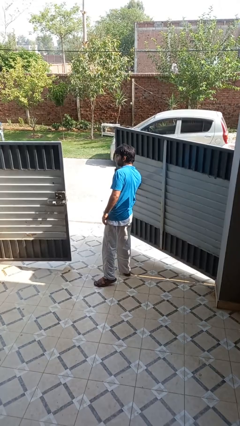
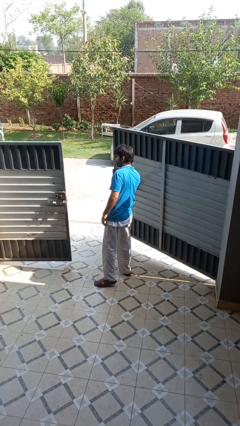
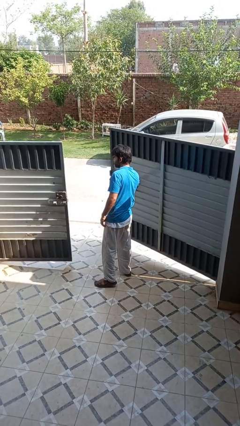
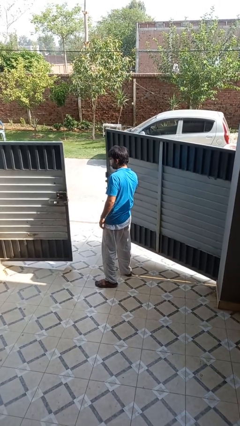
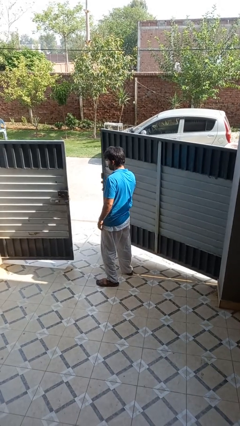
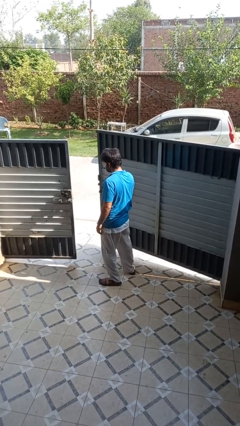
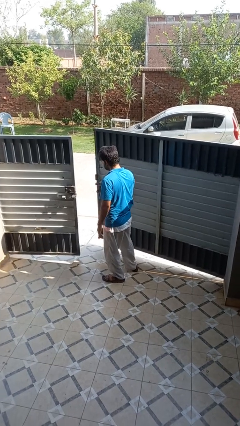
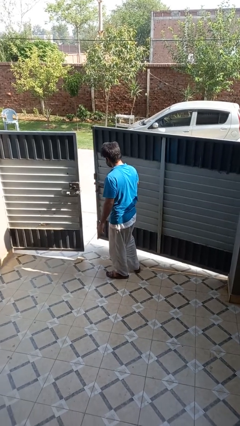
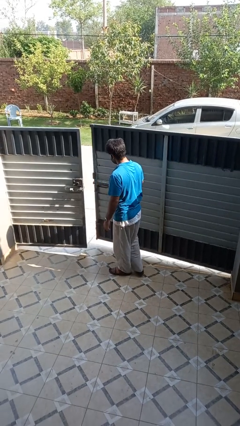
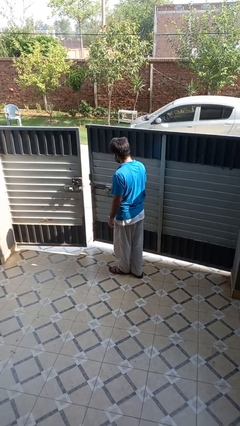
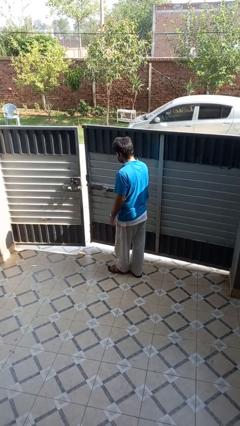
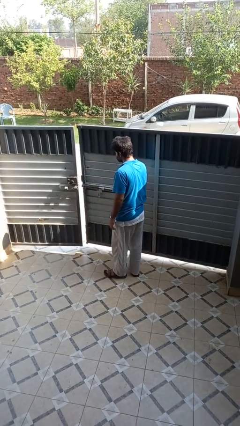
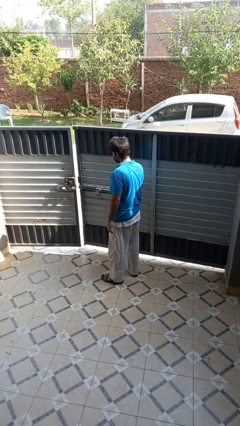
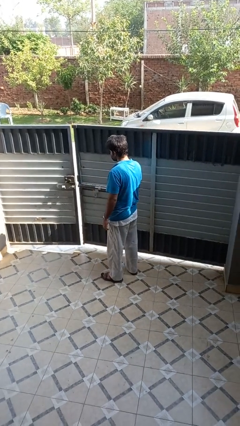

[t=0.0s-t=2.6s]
person closes gate

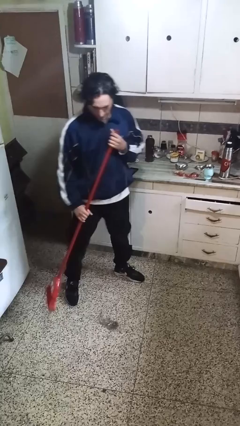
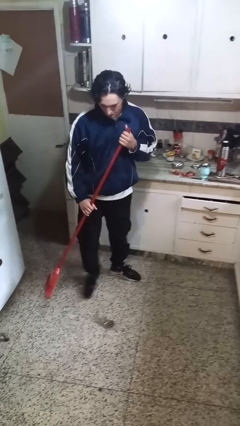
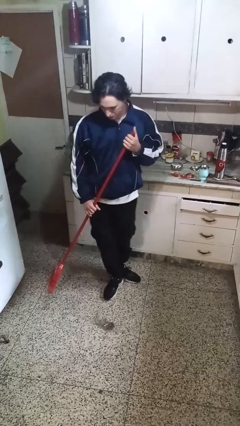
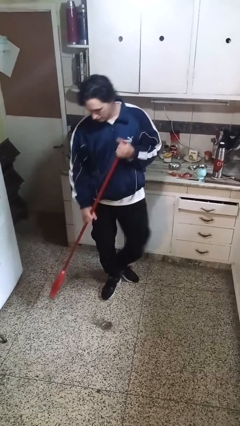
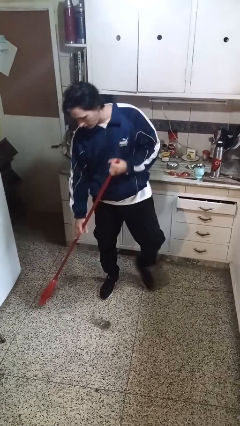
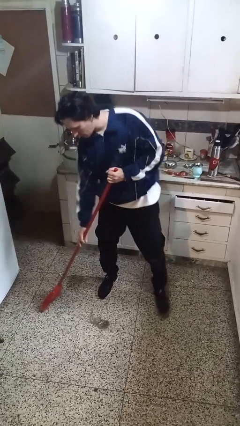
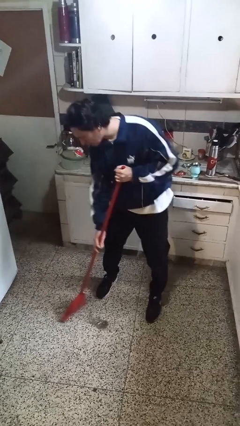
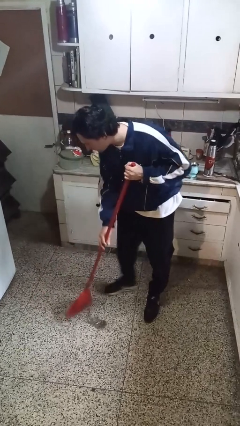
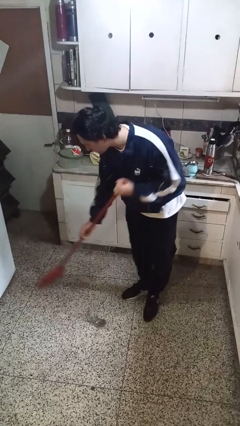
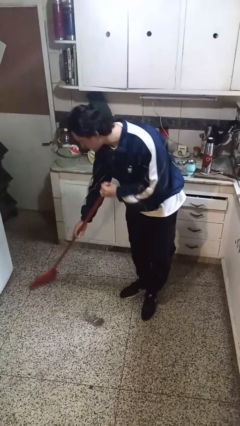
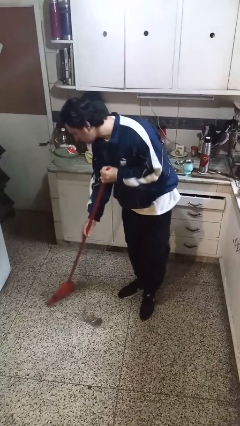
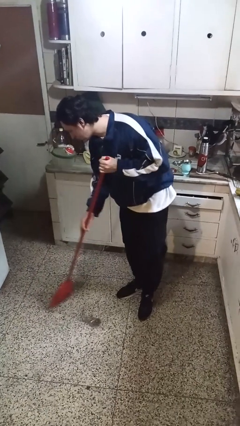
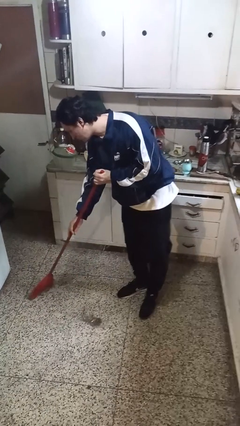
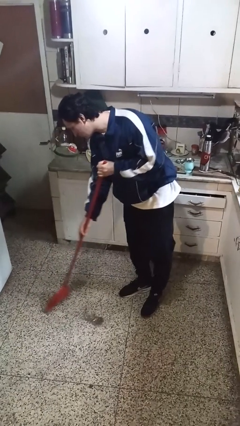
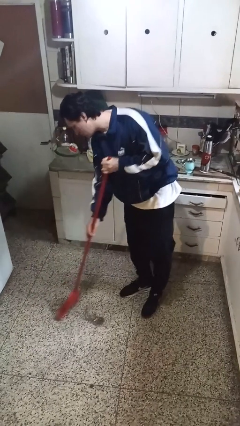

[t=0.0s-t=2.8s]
person sweeps floor

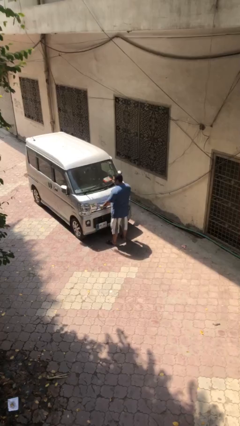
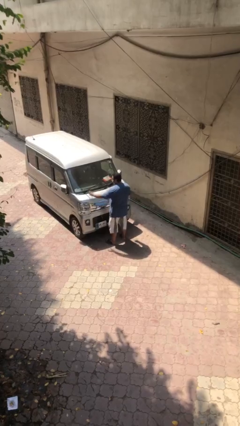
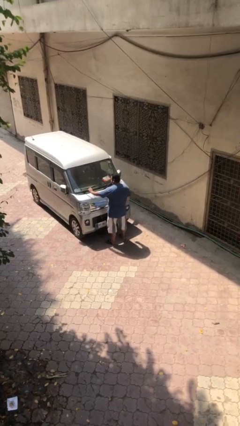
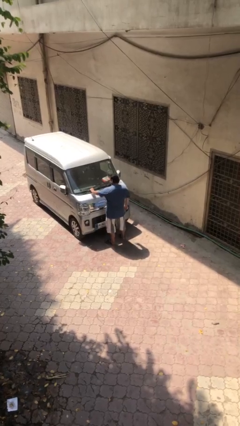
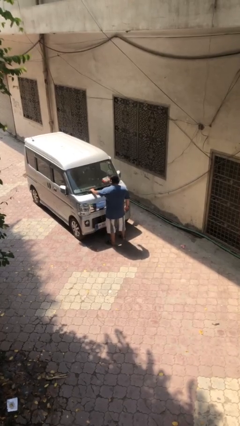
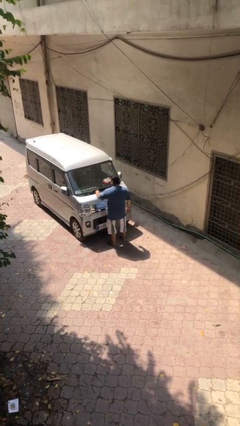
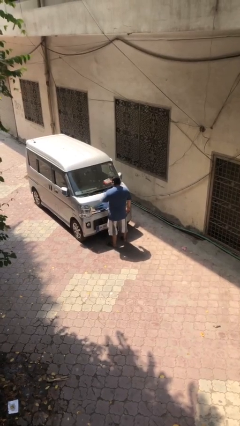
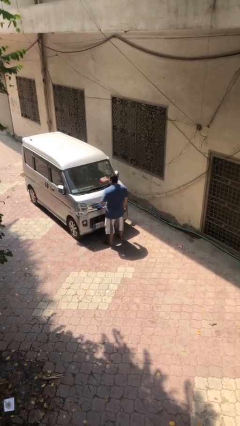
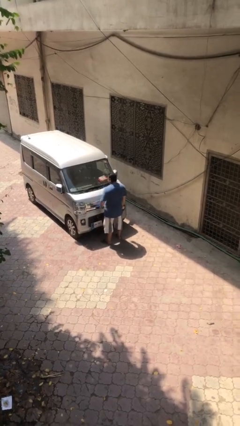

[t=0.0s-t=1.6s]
person flips down car wipers

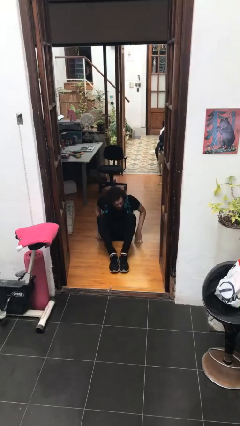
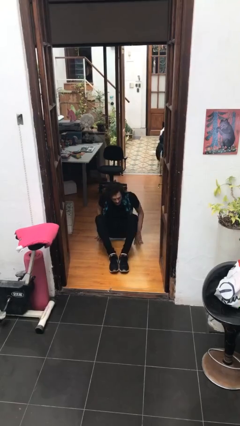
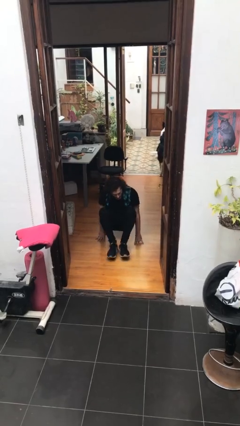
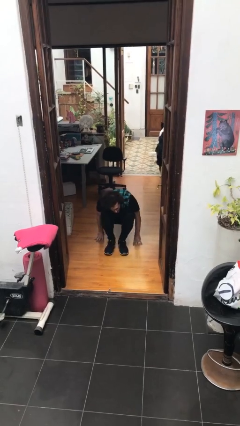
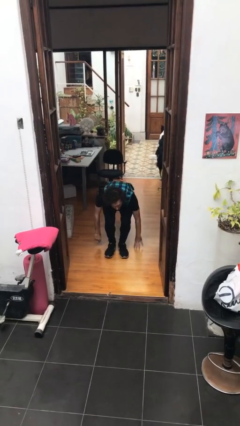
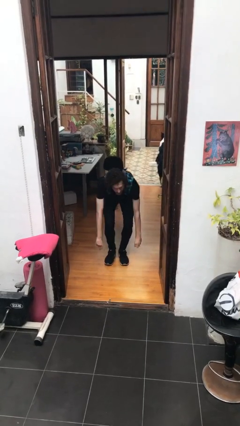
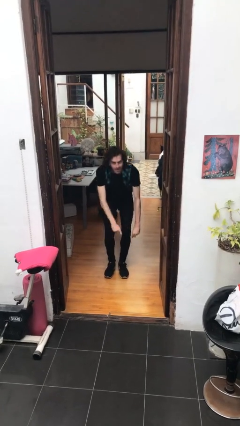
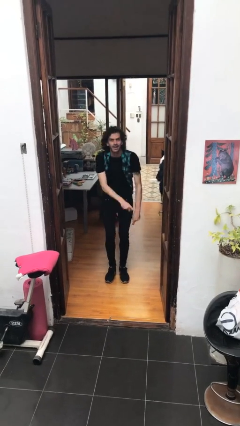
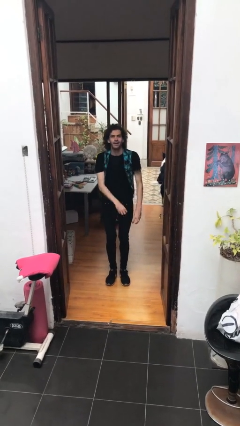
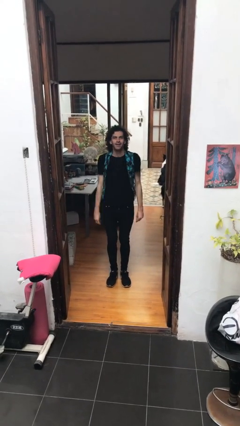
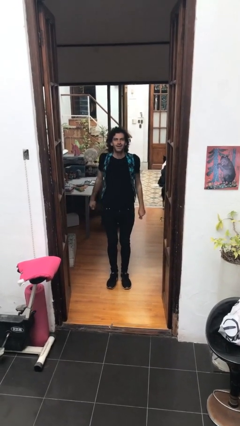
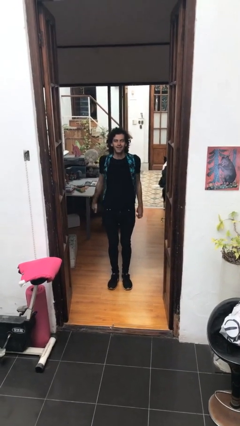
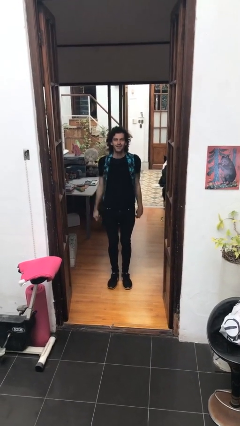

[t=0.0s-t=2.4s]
person stands up

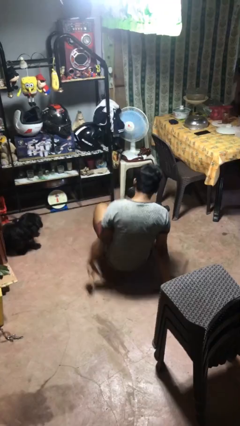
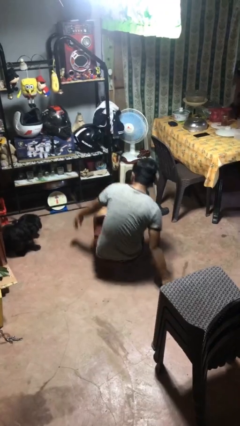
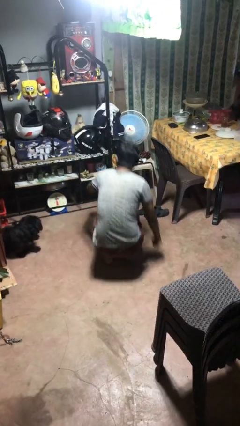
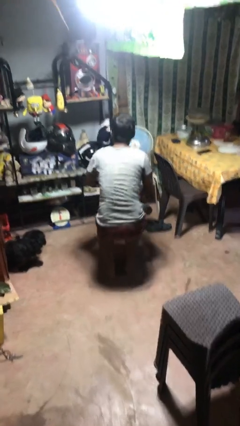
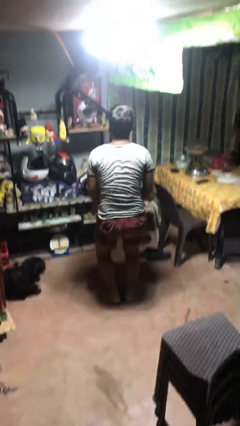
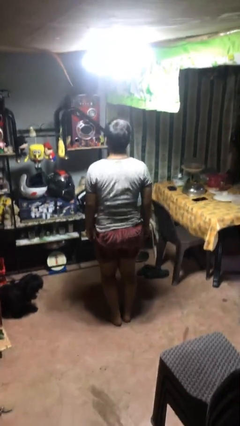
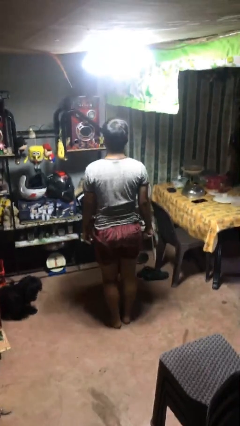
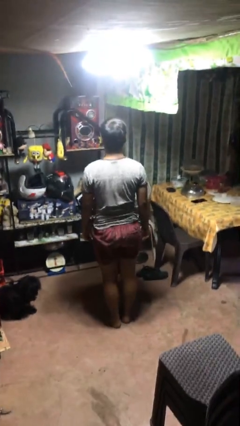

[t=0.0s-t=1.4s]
person stands up from floor

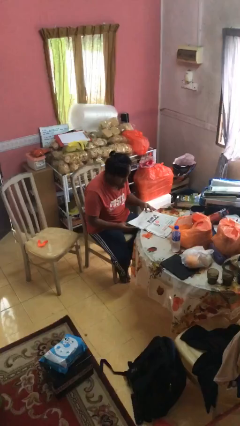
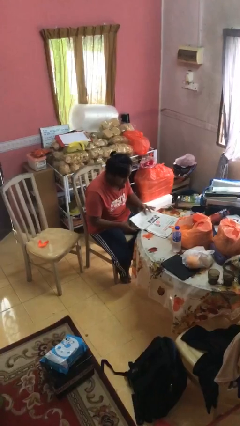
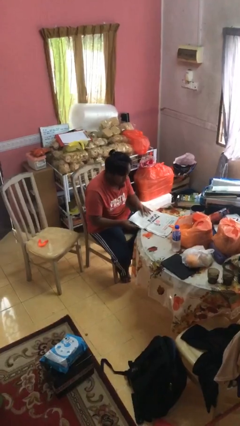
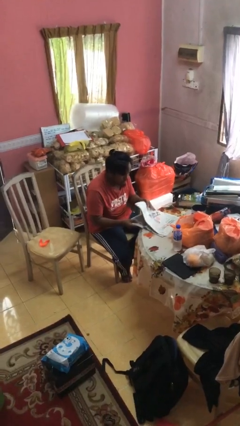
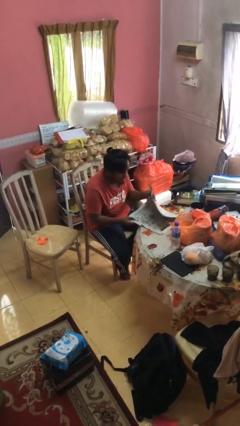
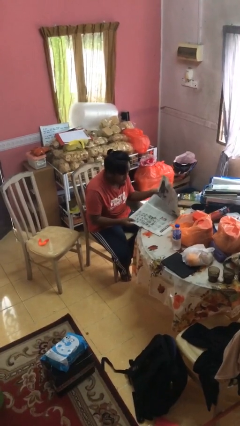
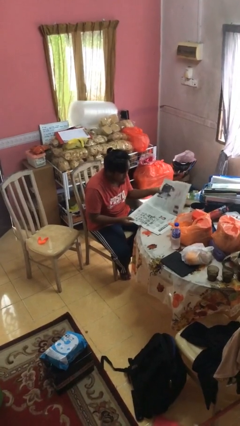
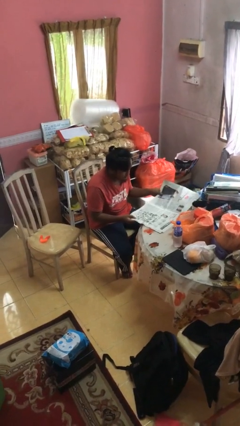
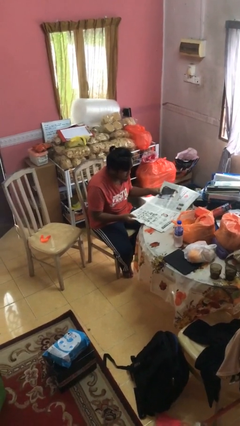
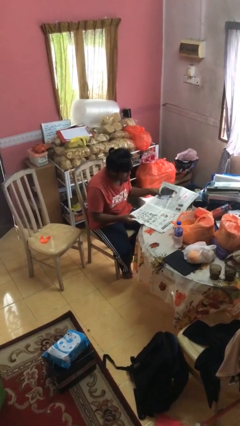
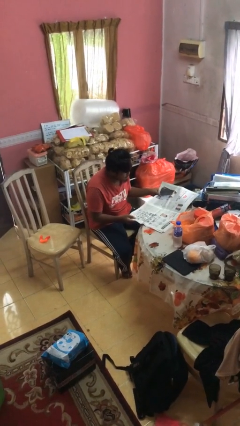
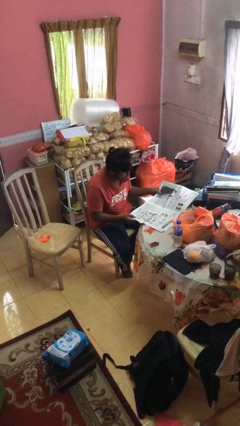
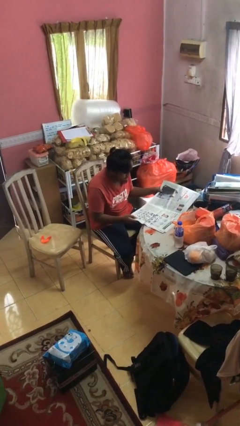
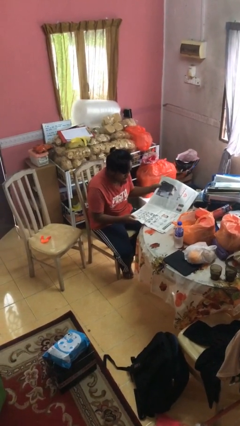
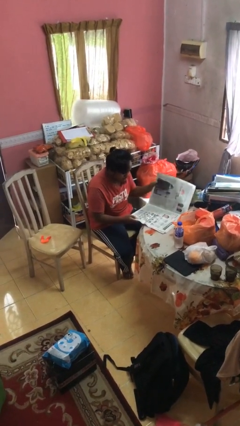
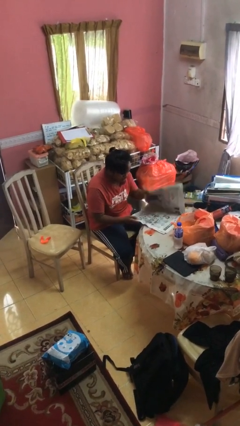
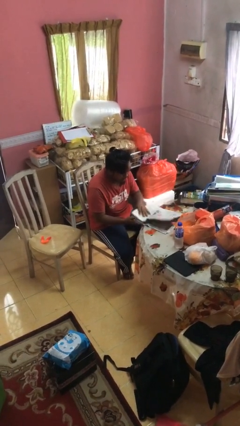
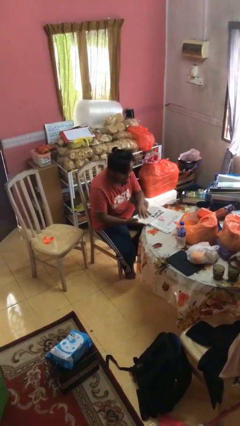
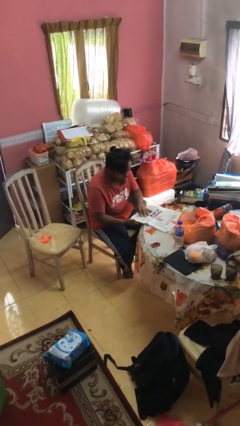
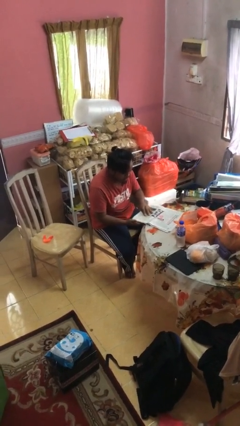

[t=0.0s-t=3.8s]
person reads newspaper

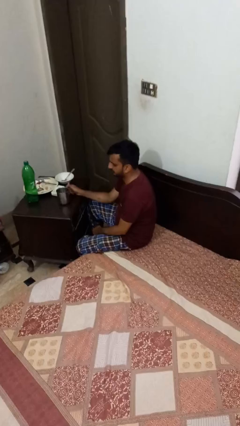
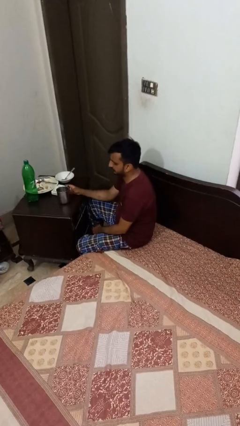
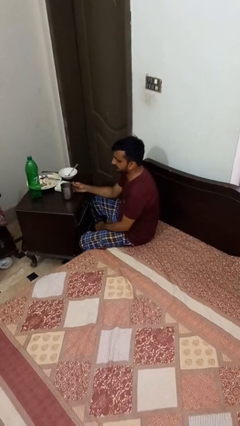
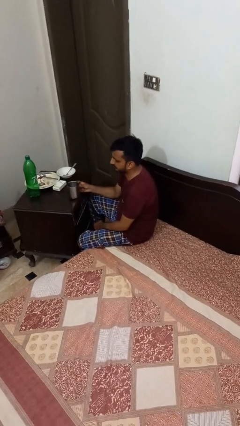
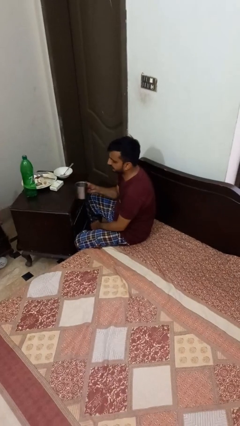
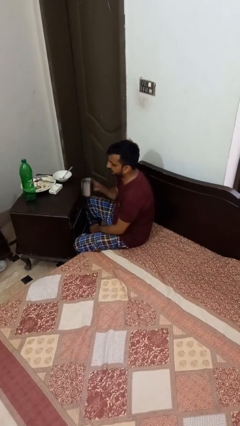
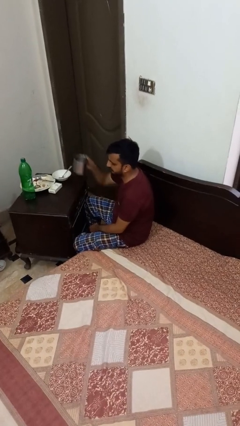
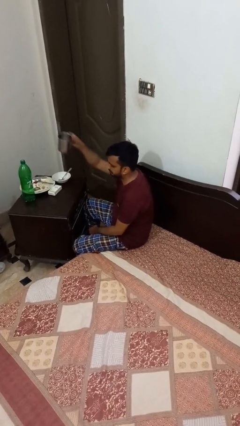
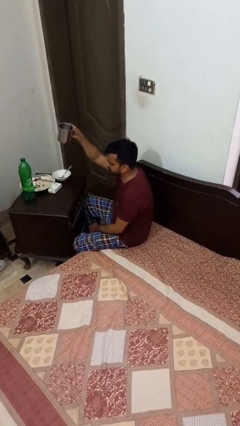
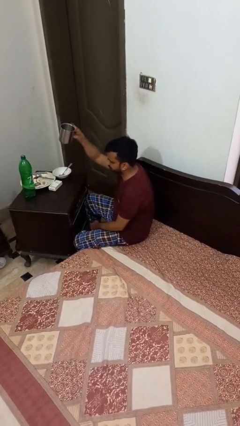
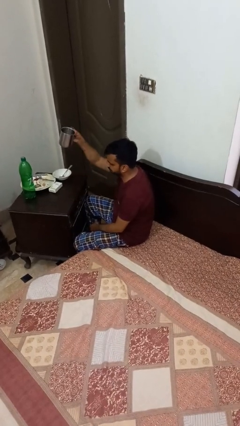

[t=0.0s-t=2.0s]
person picks up object from table

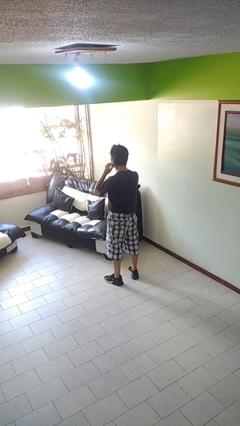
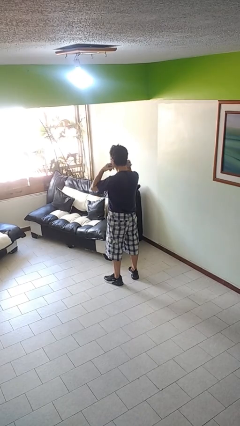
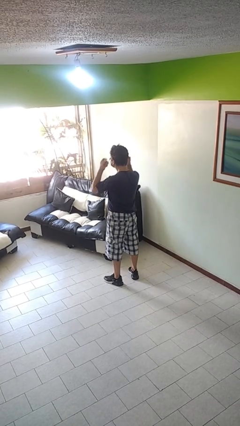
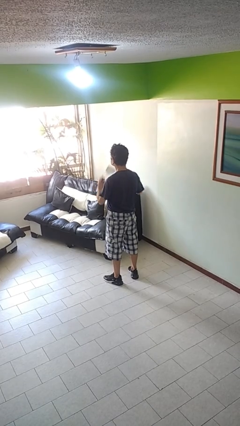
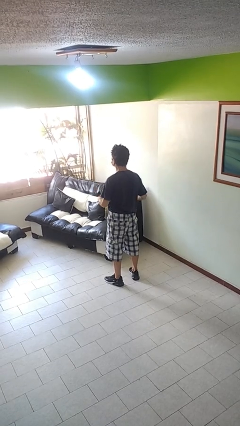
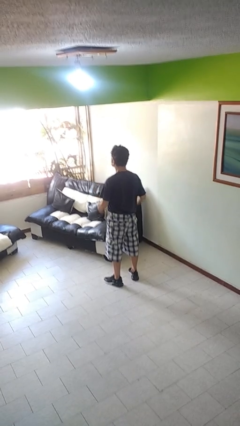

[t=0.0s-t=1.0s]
person takes off facemask
